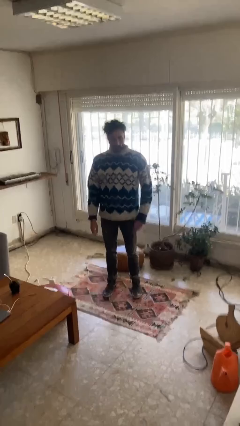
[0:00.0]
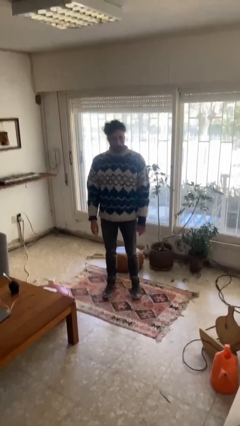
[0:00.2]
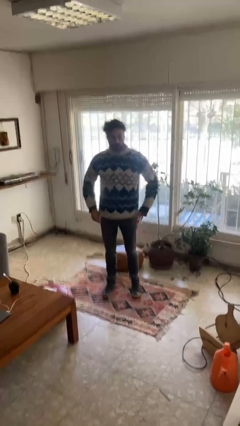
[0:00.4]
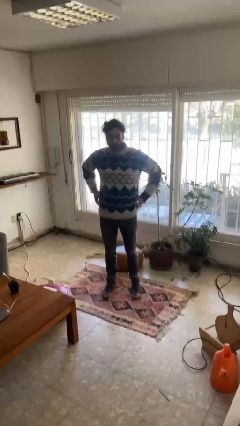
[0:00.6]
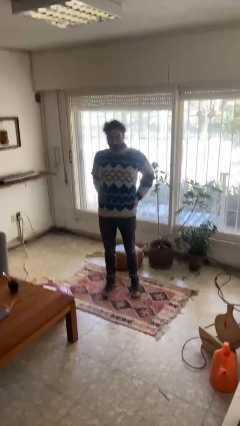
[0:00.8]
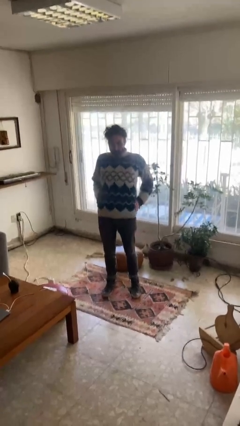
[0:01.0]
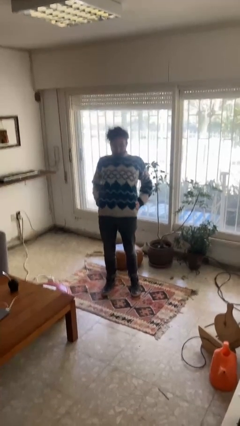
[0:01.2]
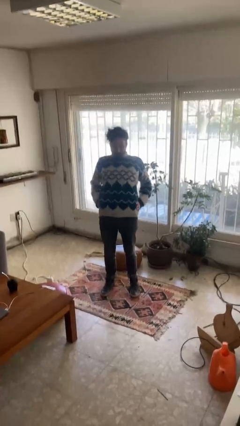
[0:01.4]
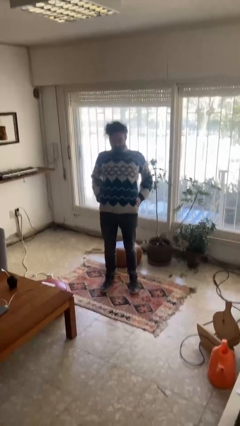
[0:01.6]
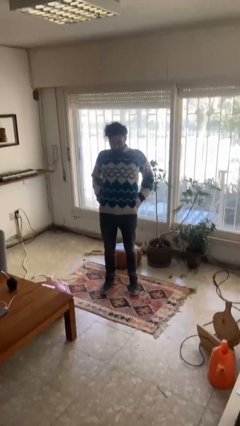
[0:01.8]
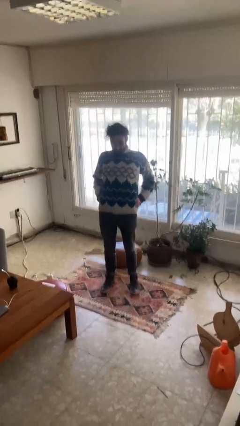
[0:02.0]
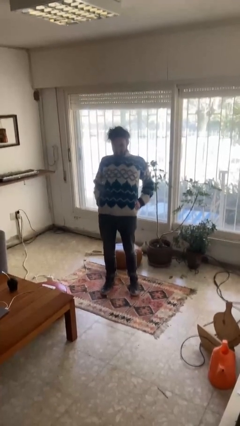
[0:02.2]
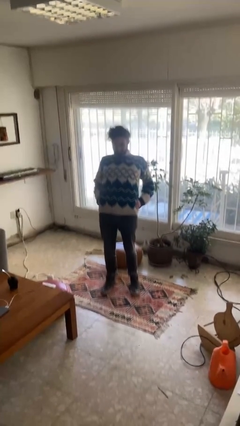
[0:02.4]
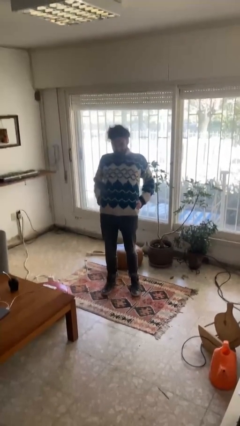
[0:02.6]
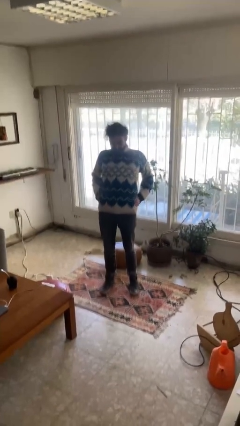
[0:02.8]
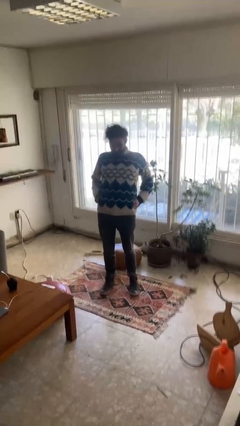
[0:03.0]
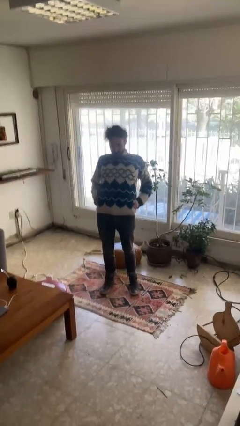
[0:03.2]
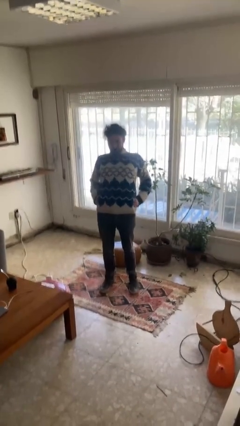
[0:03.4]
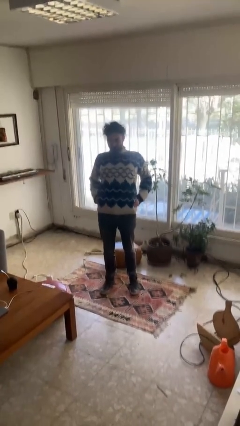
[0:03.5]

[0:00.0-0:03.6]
person stretches back

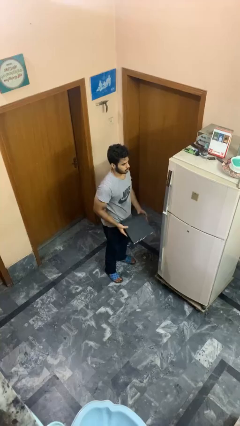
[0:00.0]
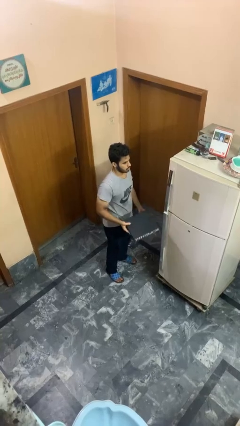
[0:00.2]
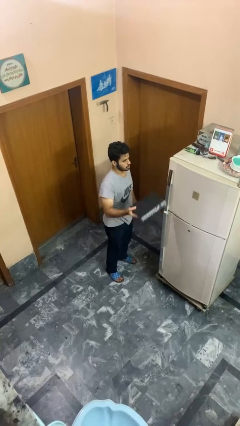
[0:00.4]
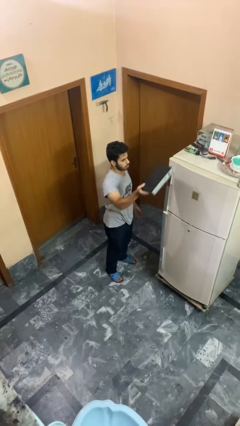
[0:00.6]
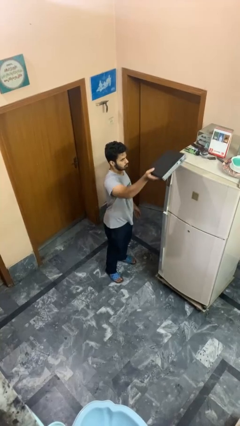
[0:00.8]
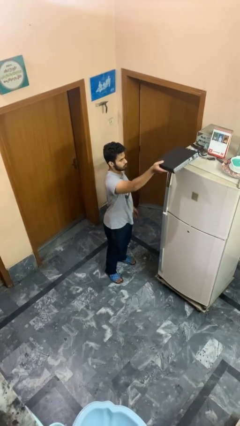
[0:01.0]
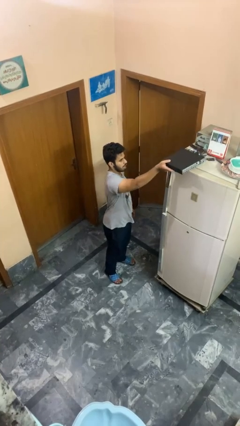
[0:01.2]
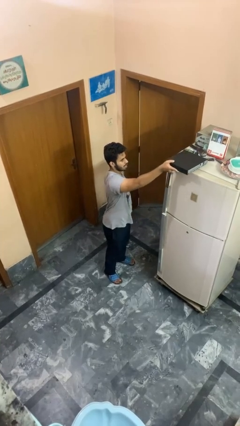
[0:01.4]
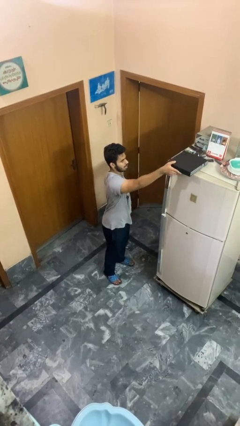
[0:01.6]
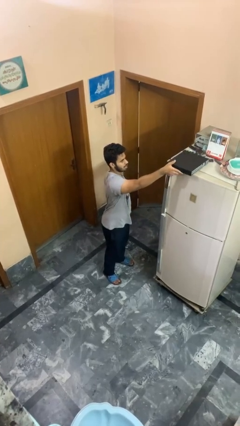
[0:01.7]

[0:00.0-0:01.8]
person puts down object on countertop

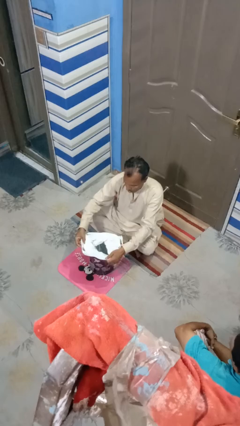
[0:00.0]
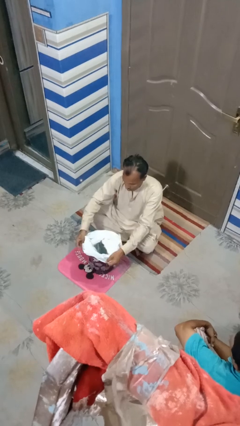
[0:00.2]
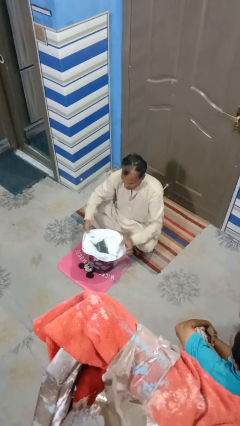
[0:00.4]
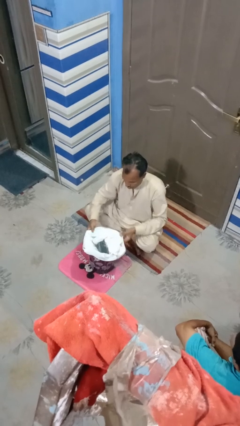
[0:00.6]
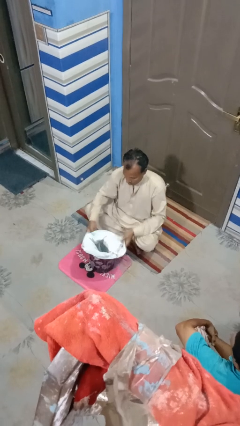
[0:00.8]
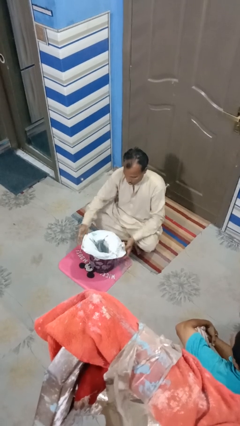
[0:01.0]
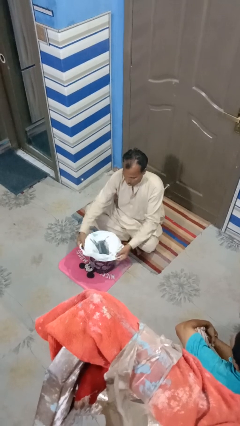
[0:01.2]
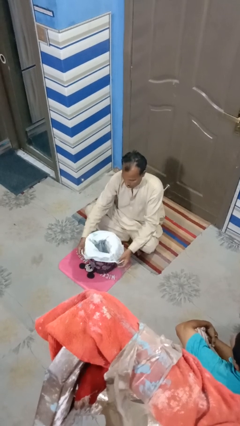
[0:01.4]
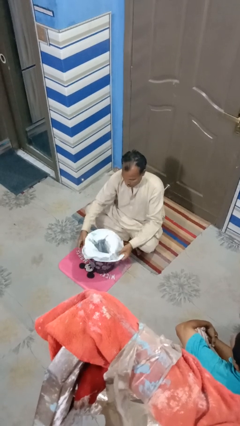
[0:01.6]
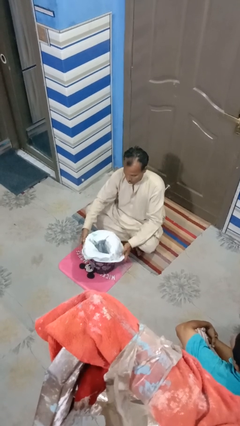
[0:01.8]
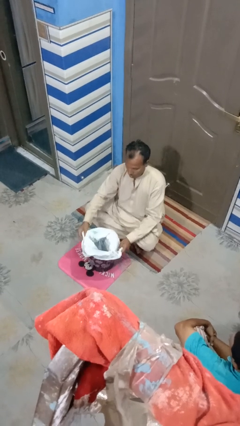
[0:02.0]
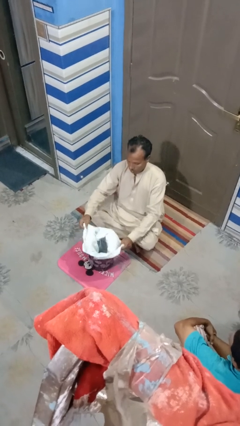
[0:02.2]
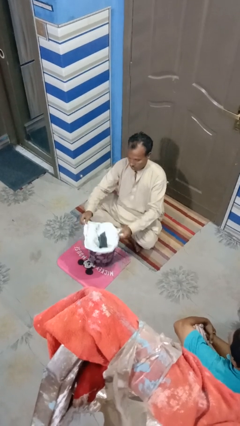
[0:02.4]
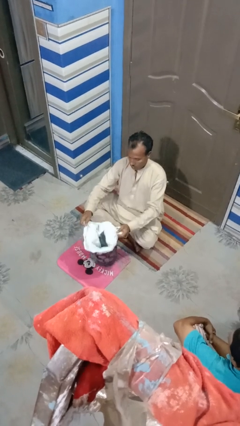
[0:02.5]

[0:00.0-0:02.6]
person inserts trashbag into trashcan

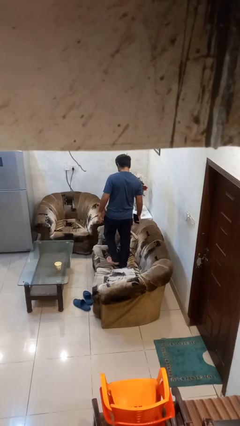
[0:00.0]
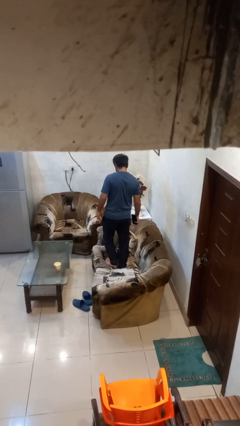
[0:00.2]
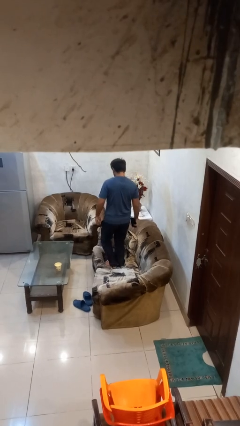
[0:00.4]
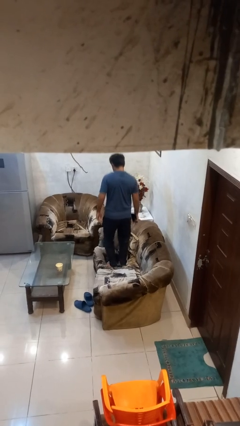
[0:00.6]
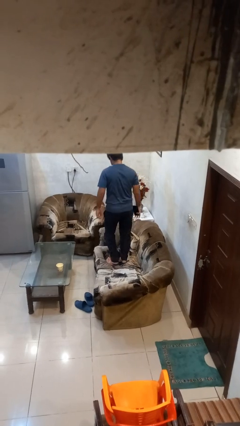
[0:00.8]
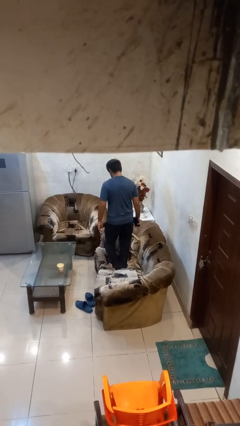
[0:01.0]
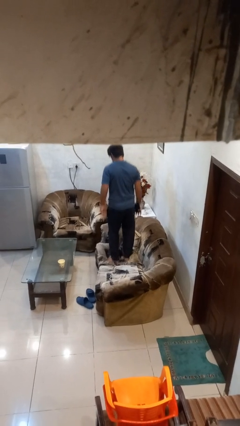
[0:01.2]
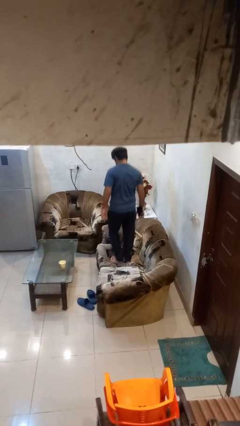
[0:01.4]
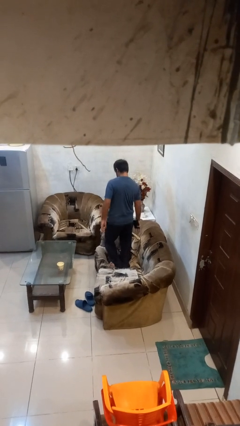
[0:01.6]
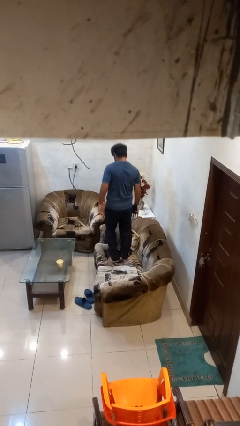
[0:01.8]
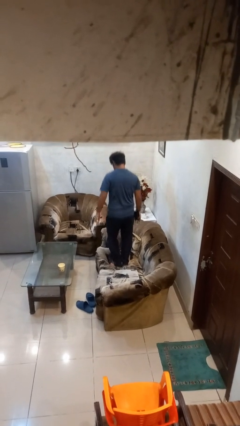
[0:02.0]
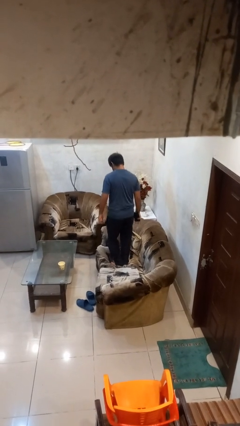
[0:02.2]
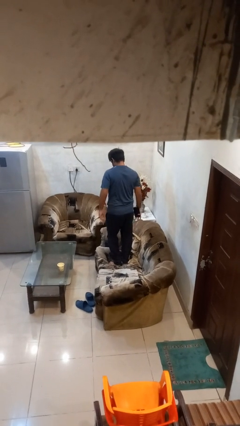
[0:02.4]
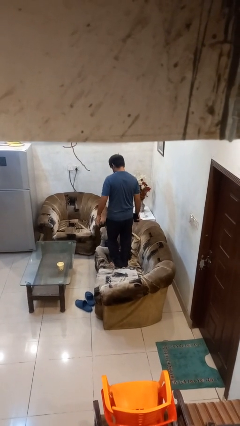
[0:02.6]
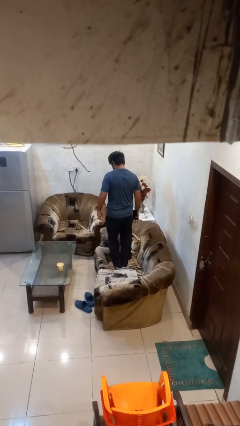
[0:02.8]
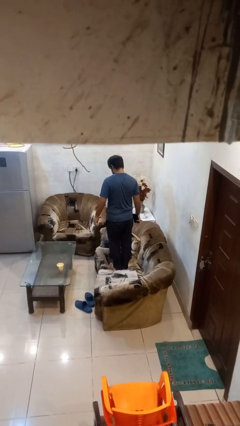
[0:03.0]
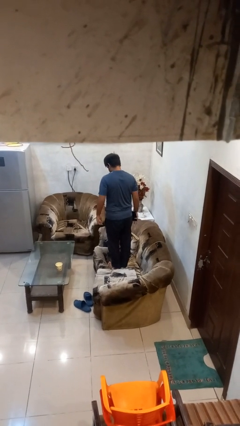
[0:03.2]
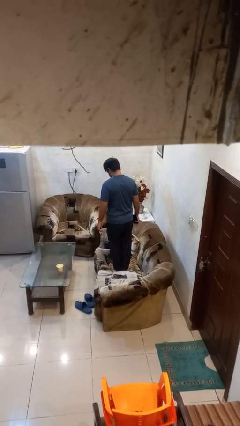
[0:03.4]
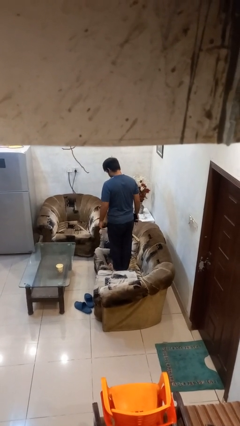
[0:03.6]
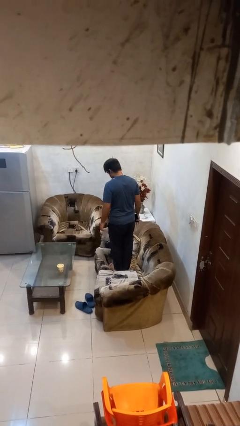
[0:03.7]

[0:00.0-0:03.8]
person jumps on couch

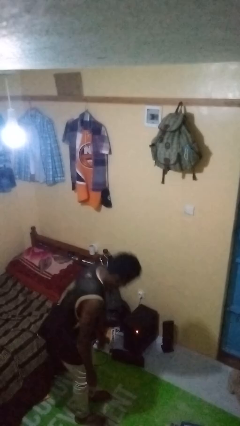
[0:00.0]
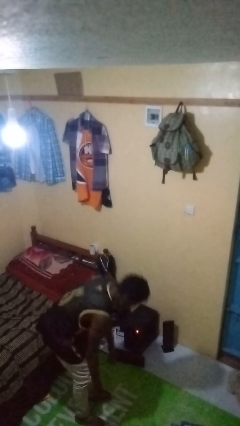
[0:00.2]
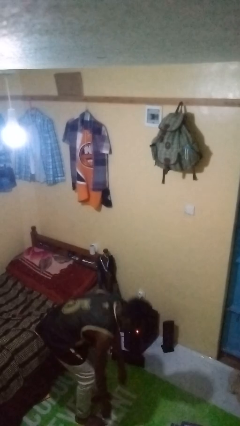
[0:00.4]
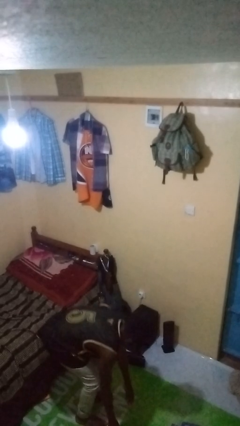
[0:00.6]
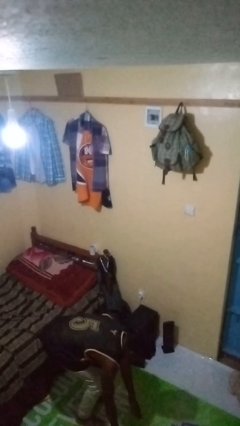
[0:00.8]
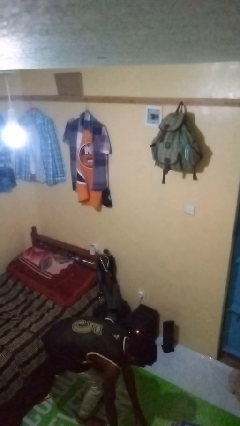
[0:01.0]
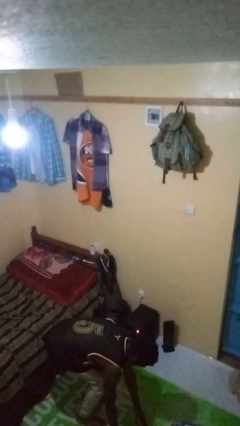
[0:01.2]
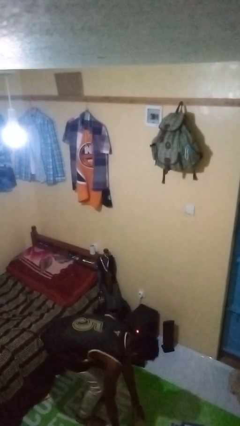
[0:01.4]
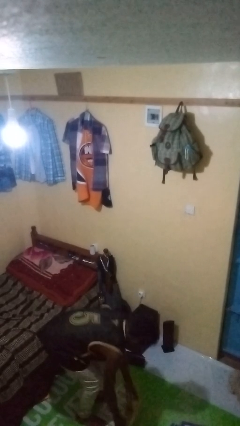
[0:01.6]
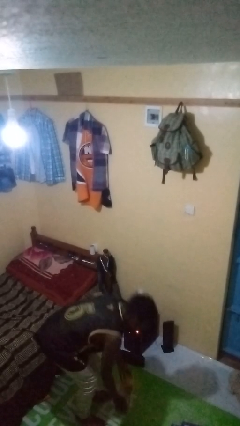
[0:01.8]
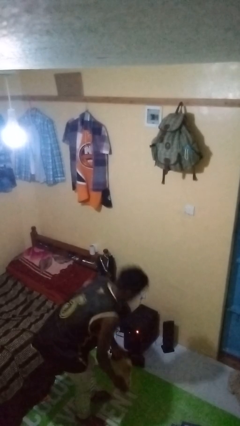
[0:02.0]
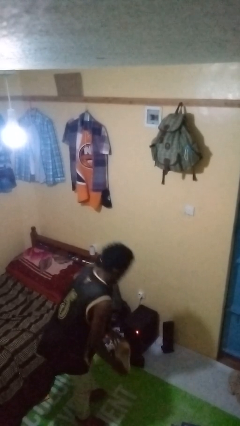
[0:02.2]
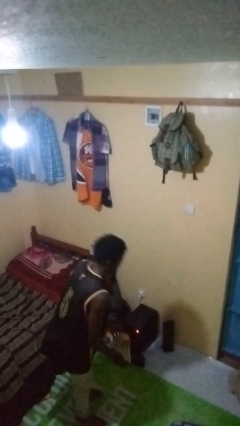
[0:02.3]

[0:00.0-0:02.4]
person picks up object from floor

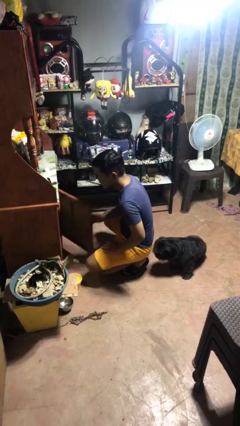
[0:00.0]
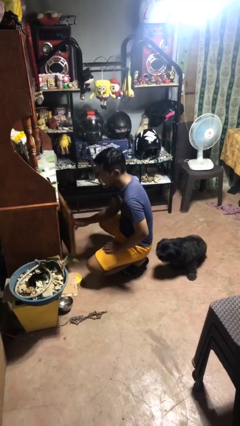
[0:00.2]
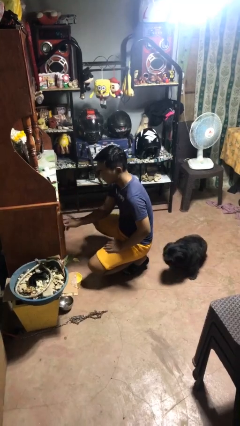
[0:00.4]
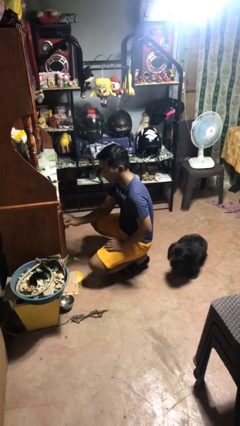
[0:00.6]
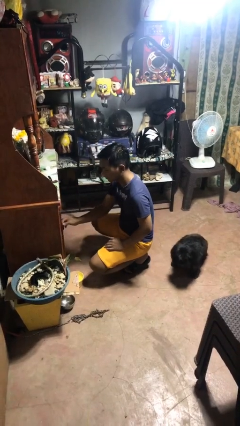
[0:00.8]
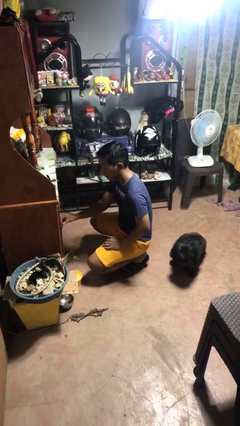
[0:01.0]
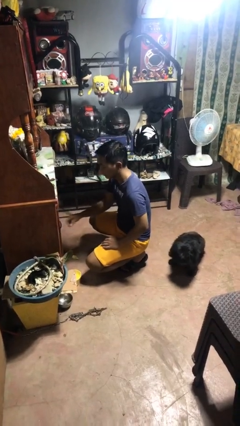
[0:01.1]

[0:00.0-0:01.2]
person closes cabinet

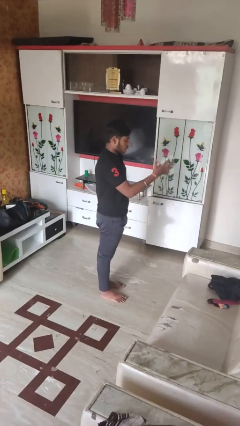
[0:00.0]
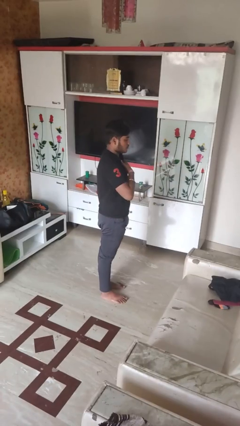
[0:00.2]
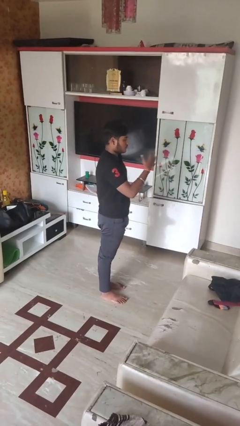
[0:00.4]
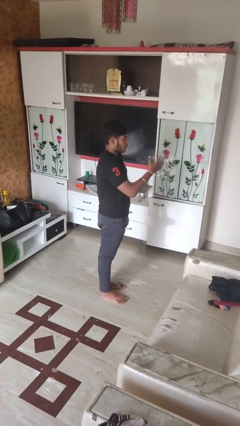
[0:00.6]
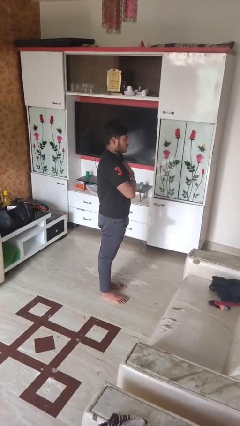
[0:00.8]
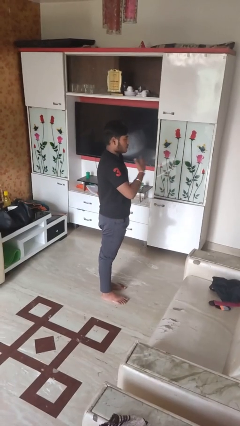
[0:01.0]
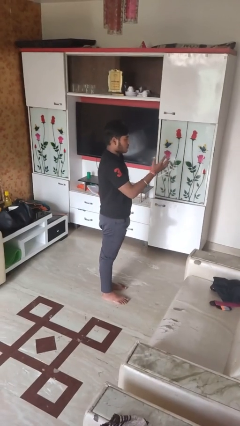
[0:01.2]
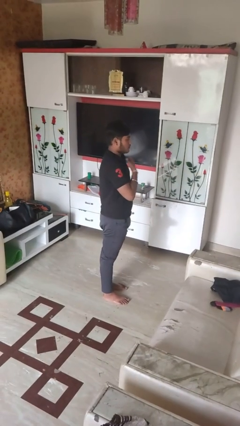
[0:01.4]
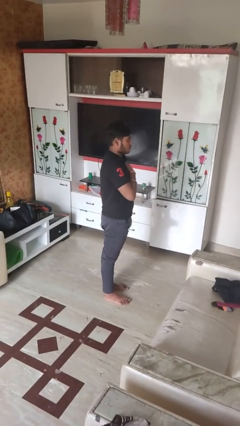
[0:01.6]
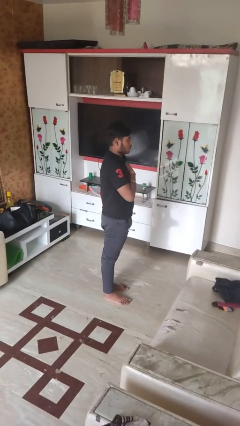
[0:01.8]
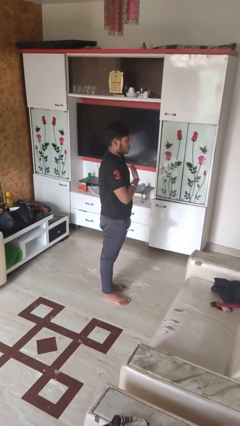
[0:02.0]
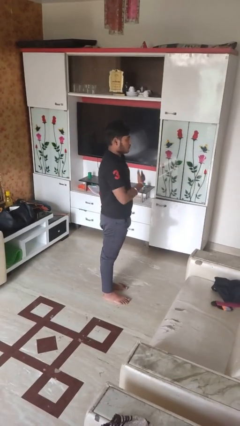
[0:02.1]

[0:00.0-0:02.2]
person drums on chest
